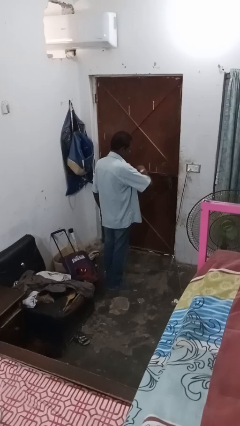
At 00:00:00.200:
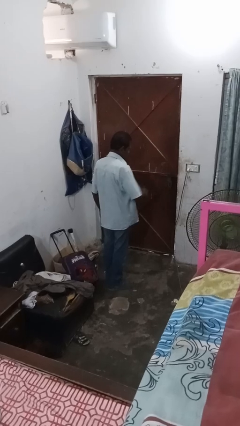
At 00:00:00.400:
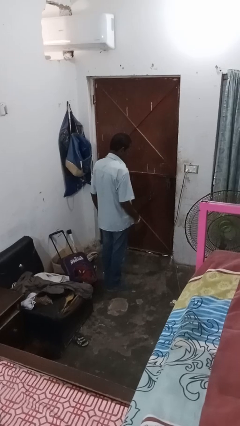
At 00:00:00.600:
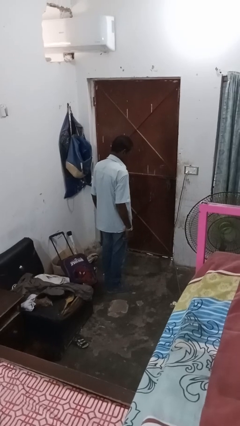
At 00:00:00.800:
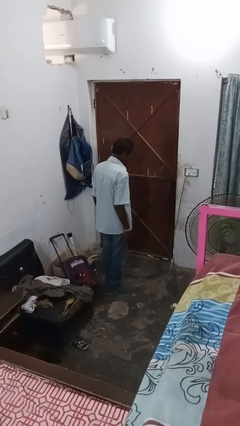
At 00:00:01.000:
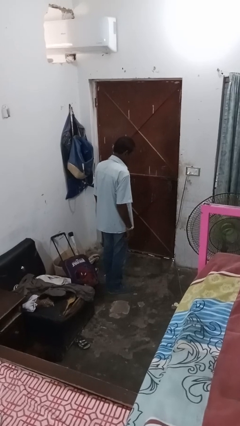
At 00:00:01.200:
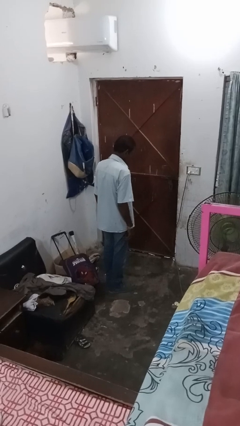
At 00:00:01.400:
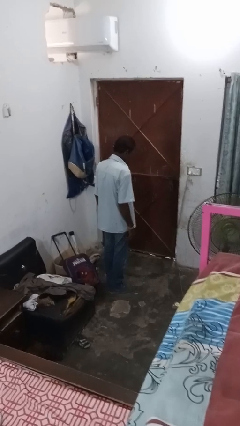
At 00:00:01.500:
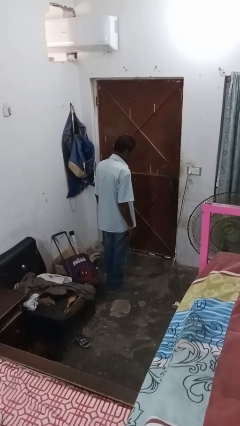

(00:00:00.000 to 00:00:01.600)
person takes off wristwatch

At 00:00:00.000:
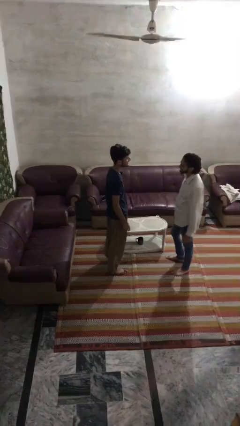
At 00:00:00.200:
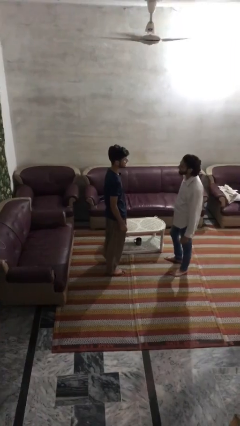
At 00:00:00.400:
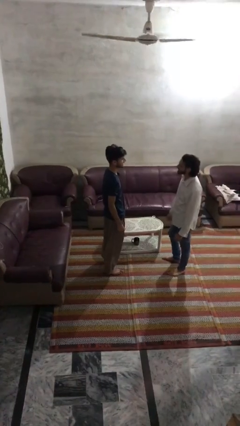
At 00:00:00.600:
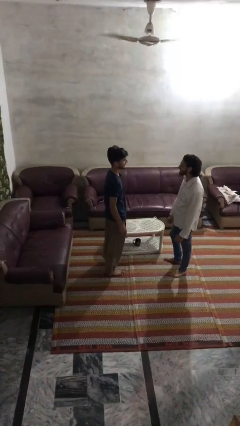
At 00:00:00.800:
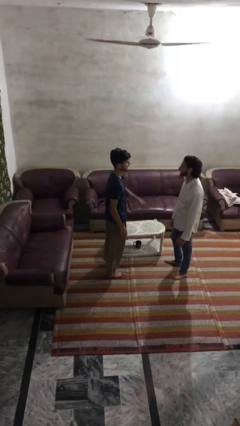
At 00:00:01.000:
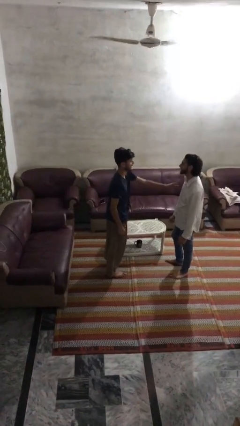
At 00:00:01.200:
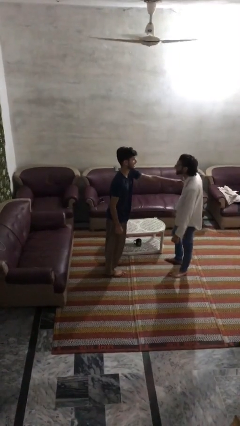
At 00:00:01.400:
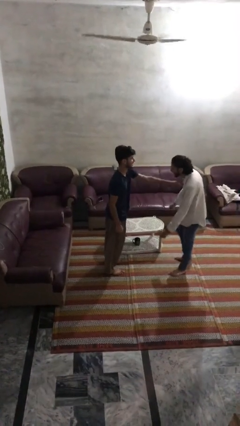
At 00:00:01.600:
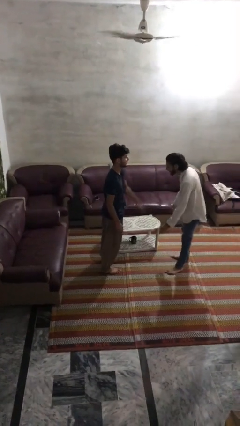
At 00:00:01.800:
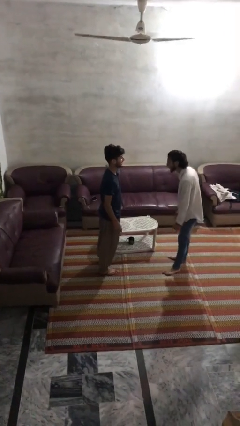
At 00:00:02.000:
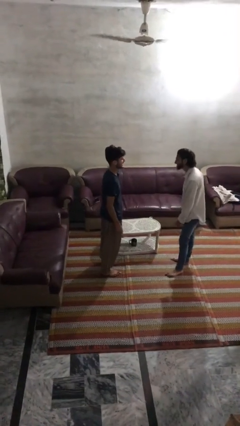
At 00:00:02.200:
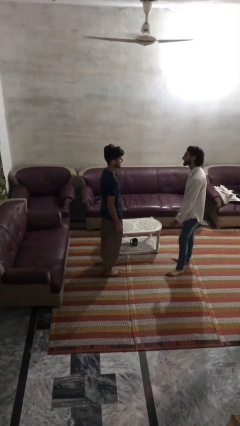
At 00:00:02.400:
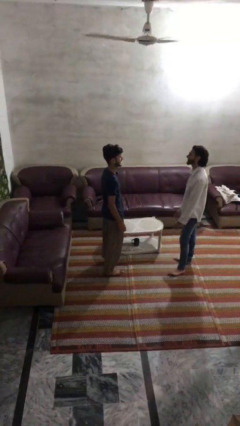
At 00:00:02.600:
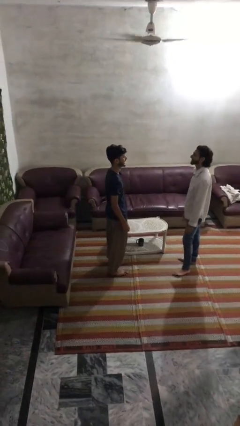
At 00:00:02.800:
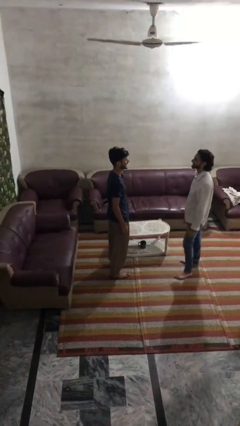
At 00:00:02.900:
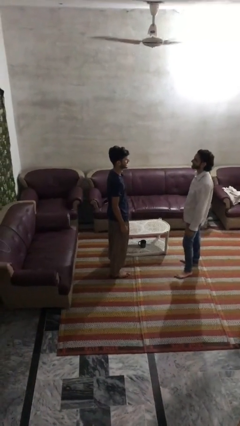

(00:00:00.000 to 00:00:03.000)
person shoves person

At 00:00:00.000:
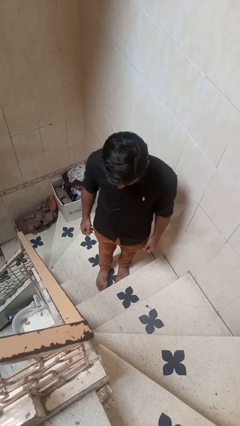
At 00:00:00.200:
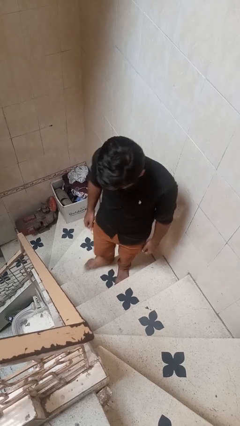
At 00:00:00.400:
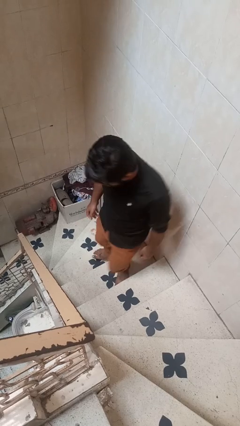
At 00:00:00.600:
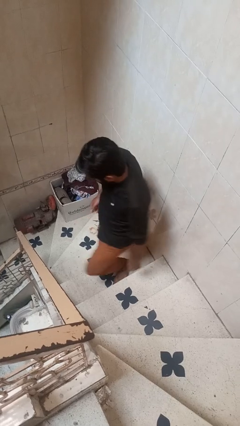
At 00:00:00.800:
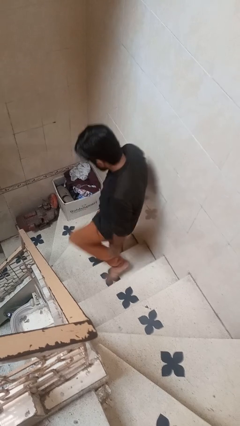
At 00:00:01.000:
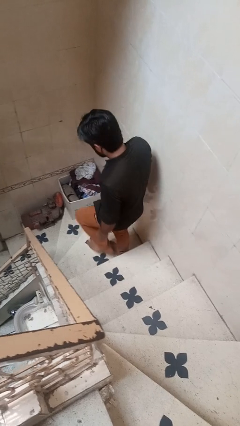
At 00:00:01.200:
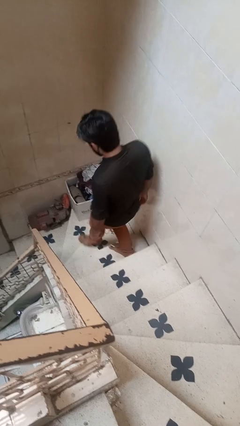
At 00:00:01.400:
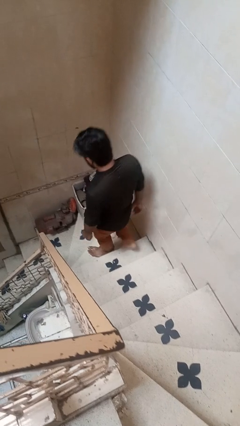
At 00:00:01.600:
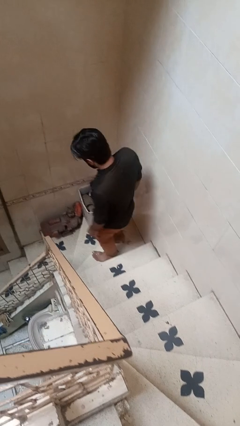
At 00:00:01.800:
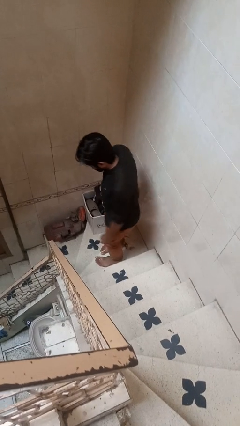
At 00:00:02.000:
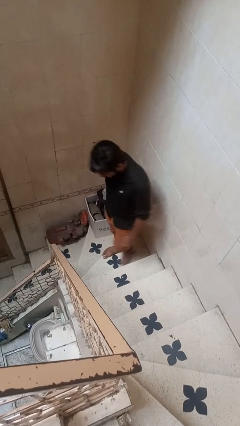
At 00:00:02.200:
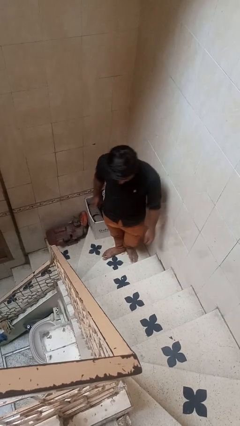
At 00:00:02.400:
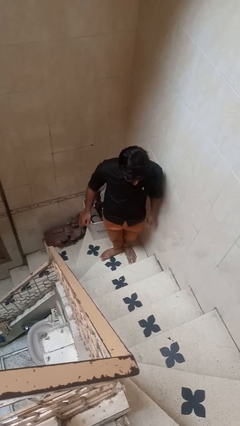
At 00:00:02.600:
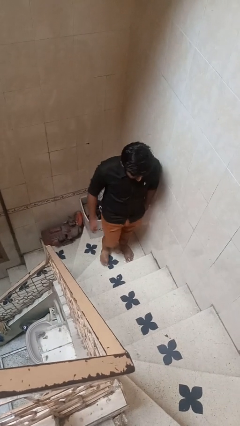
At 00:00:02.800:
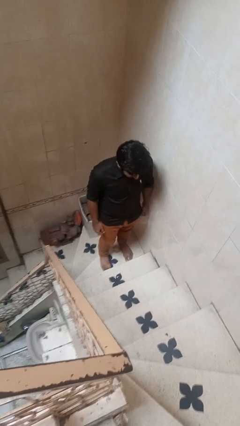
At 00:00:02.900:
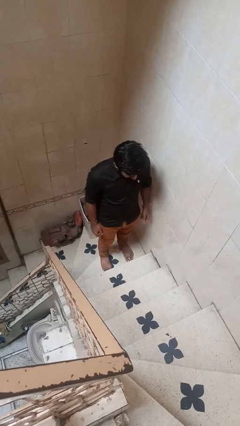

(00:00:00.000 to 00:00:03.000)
person climbs down stairs

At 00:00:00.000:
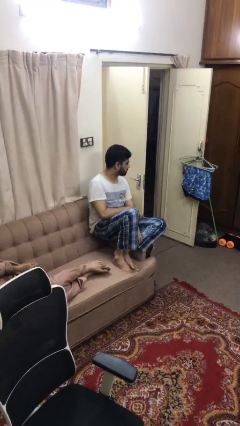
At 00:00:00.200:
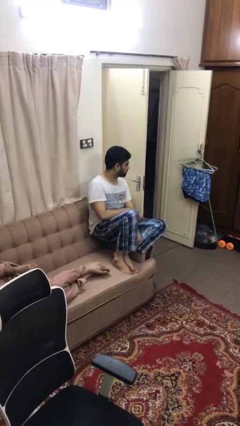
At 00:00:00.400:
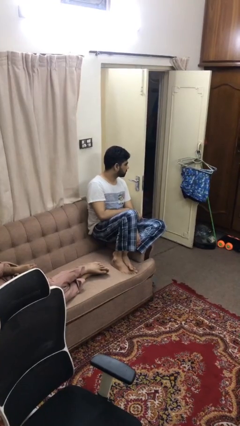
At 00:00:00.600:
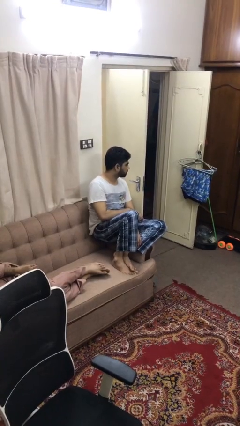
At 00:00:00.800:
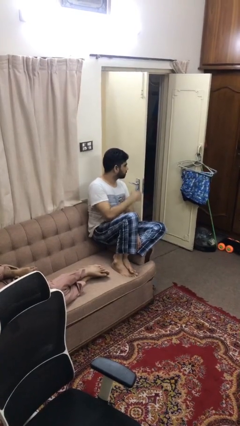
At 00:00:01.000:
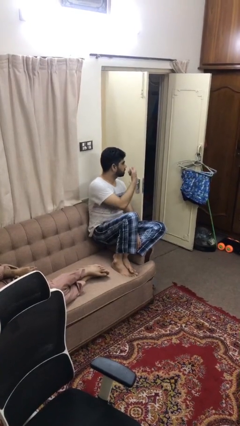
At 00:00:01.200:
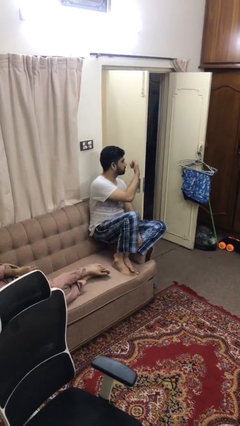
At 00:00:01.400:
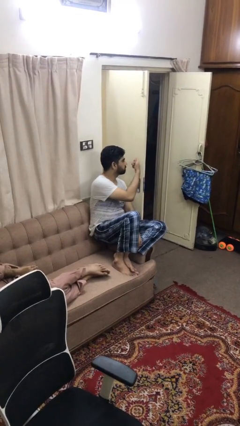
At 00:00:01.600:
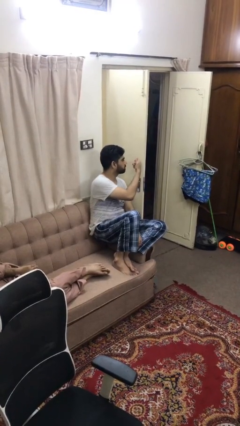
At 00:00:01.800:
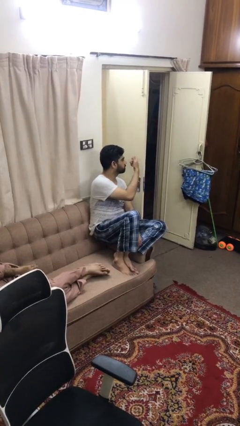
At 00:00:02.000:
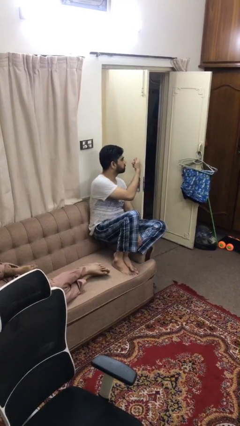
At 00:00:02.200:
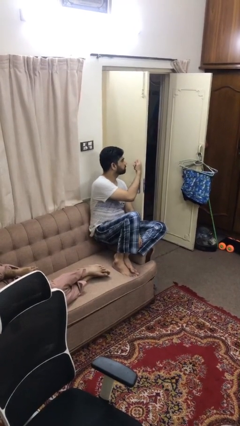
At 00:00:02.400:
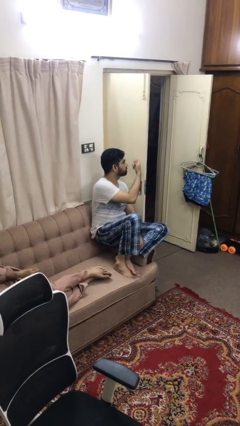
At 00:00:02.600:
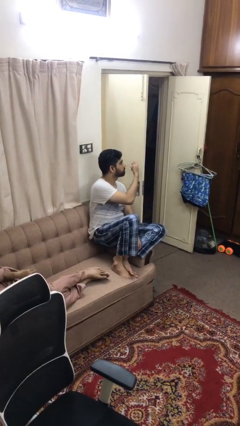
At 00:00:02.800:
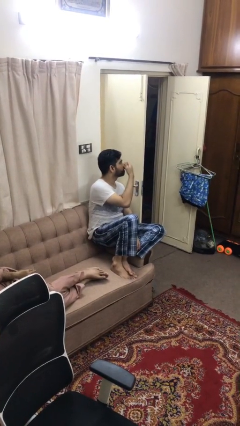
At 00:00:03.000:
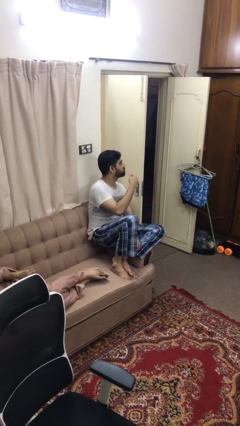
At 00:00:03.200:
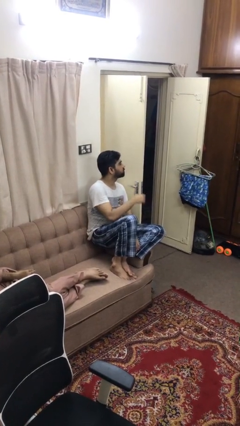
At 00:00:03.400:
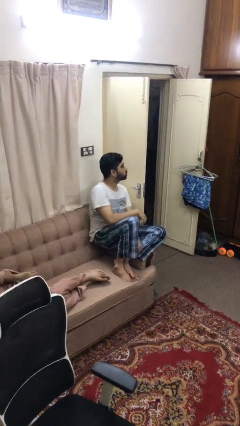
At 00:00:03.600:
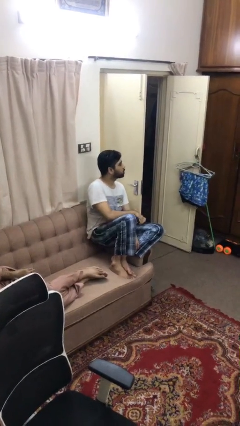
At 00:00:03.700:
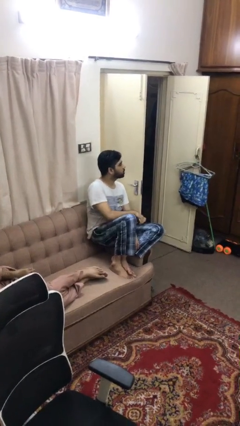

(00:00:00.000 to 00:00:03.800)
person taps object with finger

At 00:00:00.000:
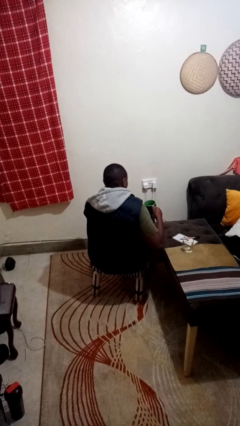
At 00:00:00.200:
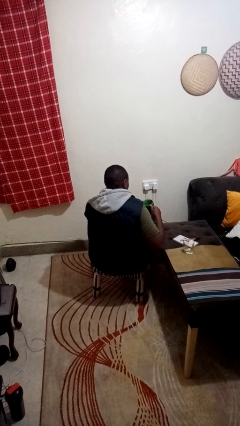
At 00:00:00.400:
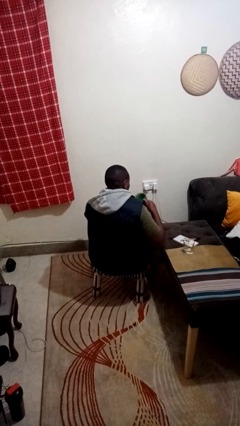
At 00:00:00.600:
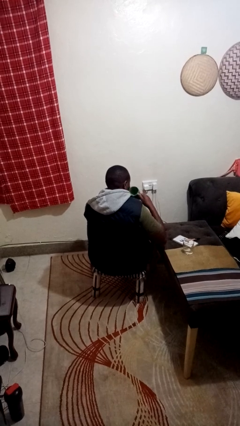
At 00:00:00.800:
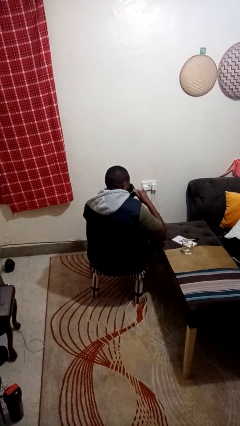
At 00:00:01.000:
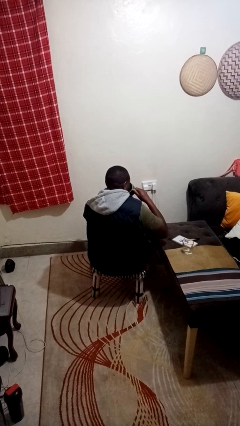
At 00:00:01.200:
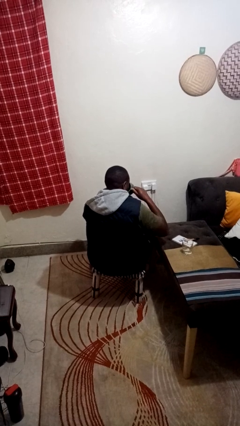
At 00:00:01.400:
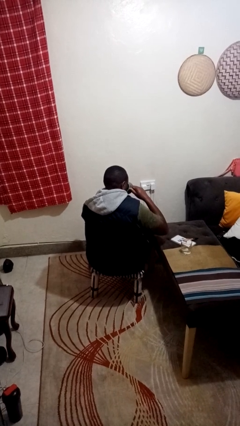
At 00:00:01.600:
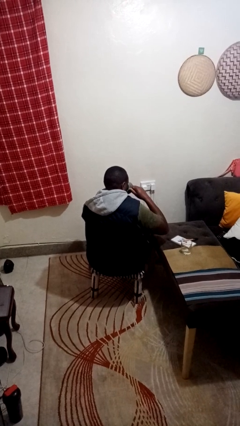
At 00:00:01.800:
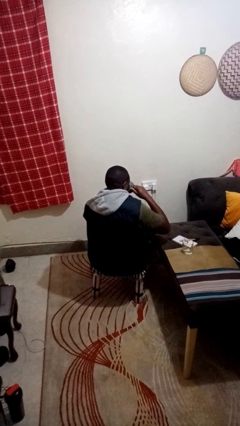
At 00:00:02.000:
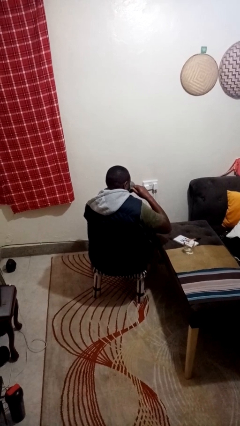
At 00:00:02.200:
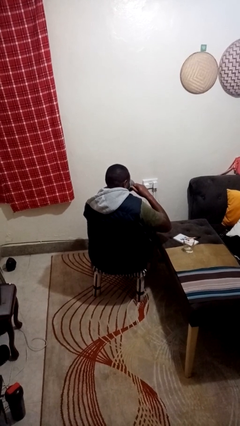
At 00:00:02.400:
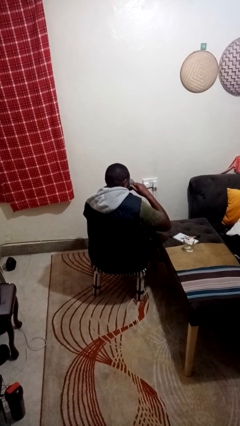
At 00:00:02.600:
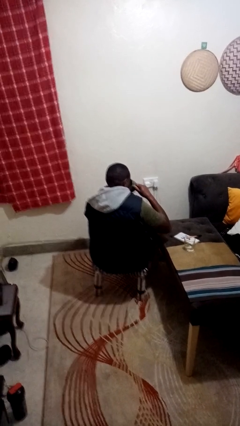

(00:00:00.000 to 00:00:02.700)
person drinks from mug

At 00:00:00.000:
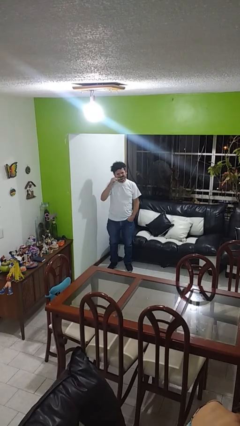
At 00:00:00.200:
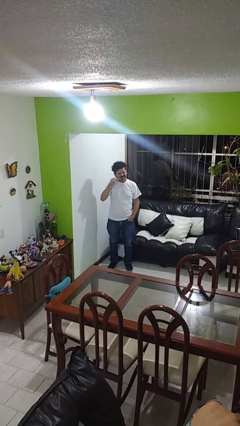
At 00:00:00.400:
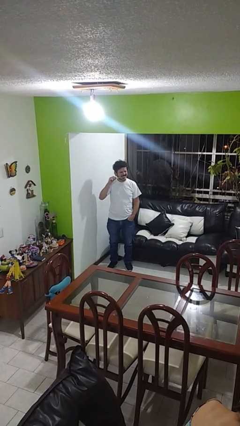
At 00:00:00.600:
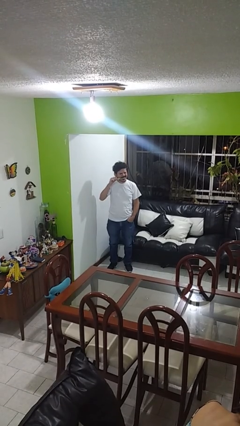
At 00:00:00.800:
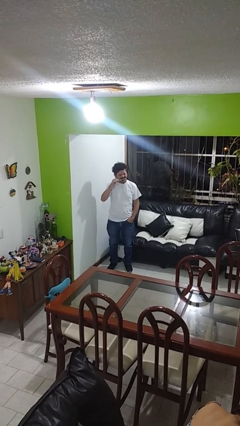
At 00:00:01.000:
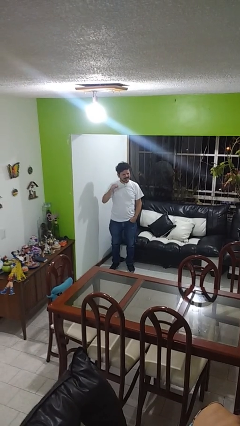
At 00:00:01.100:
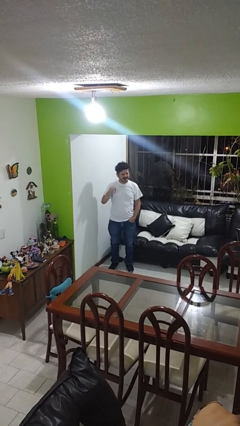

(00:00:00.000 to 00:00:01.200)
person brushes teeth

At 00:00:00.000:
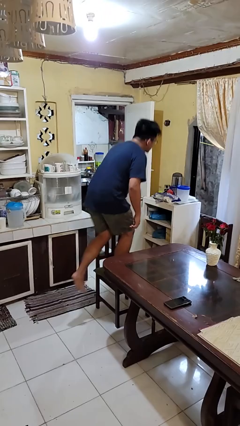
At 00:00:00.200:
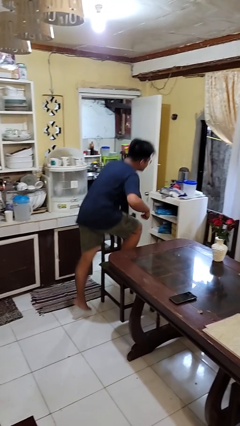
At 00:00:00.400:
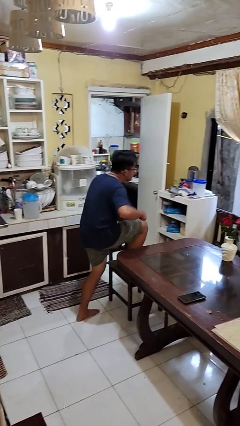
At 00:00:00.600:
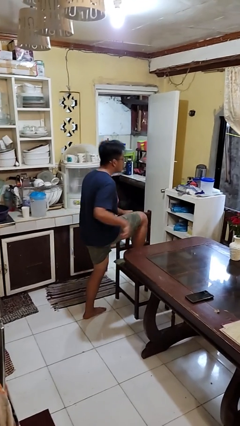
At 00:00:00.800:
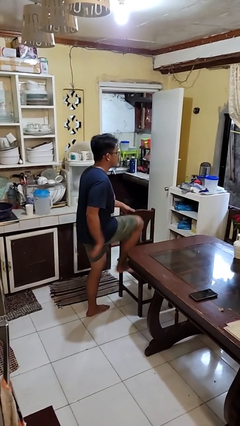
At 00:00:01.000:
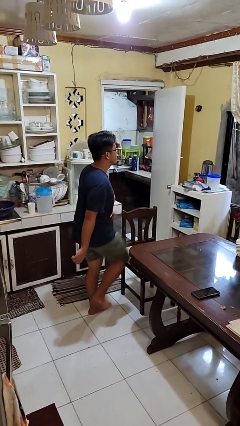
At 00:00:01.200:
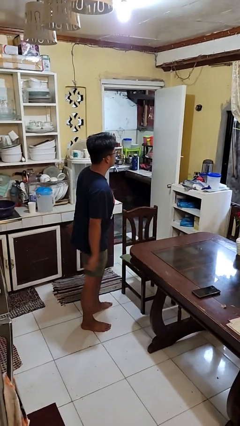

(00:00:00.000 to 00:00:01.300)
person climbs off chair

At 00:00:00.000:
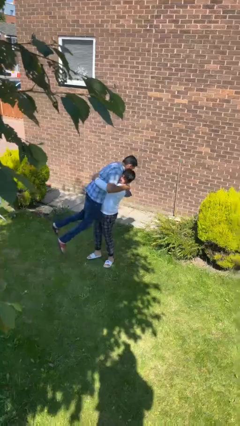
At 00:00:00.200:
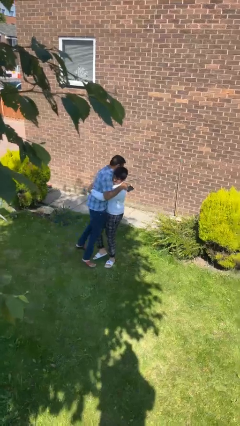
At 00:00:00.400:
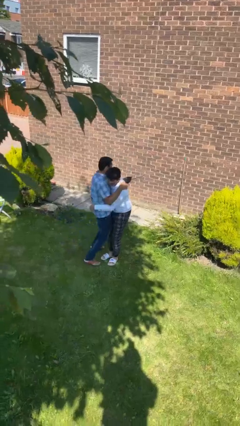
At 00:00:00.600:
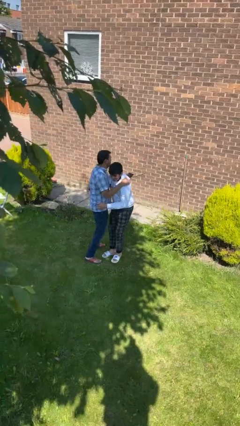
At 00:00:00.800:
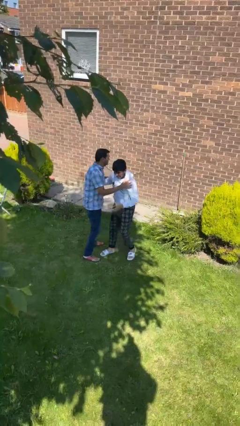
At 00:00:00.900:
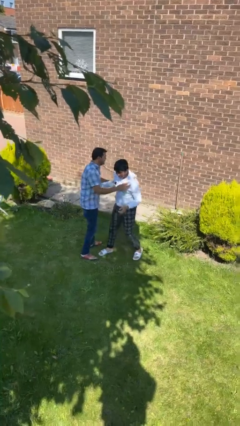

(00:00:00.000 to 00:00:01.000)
person puts down person
